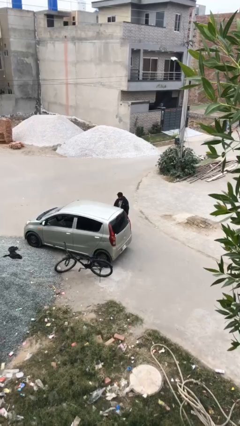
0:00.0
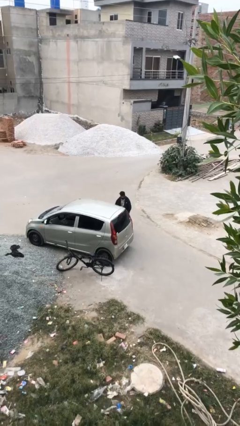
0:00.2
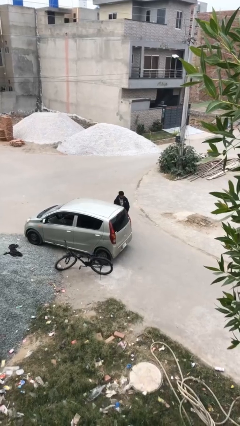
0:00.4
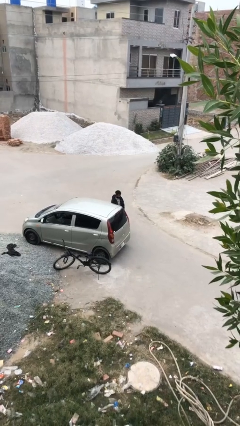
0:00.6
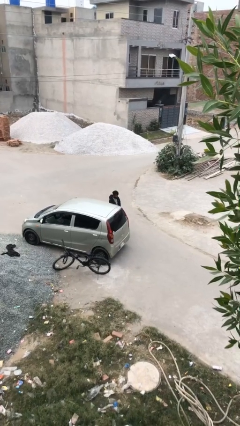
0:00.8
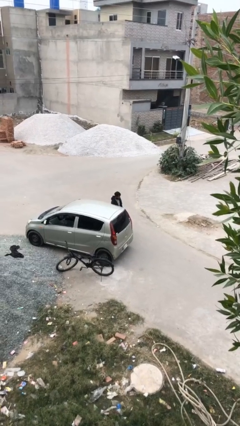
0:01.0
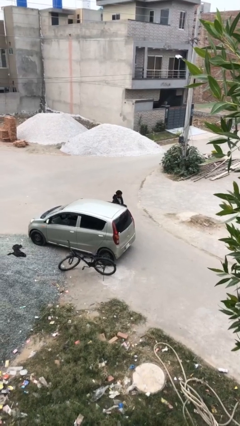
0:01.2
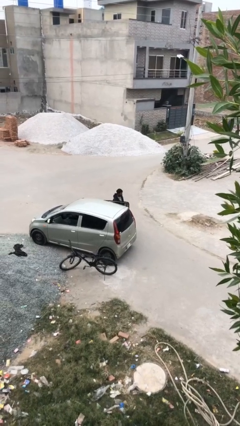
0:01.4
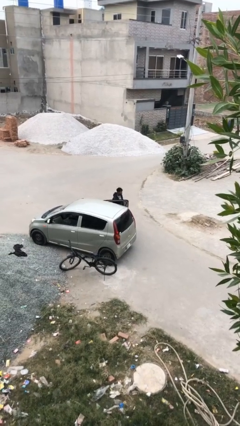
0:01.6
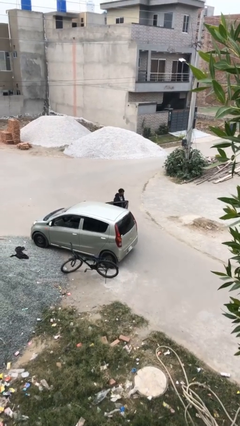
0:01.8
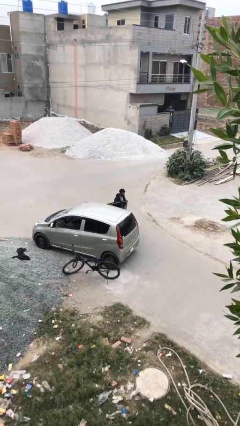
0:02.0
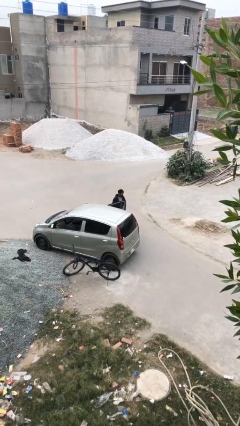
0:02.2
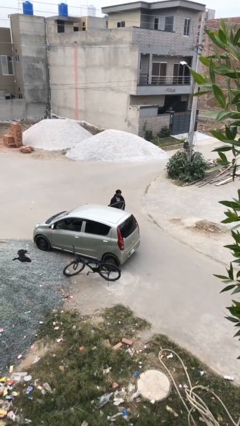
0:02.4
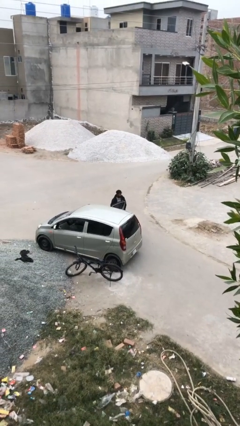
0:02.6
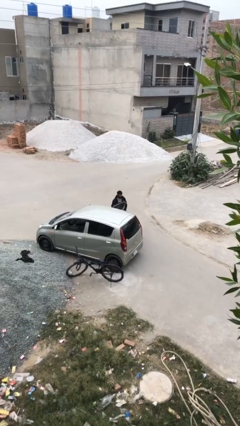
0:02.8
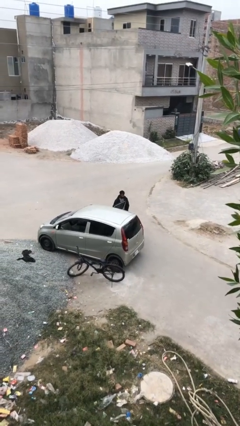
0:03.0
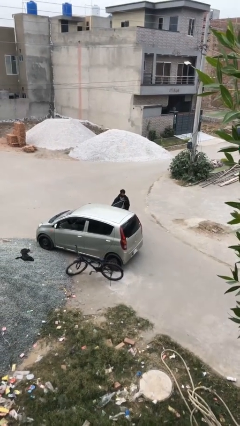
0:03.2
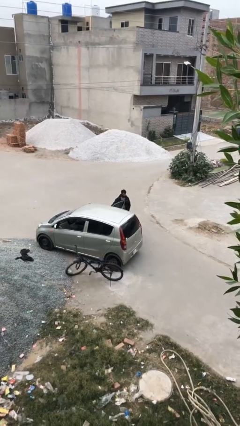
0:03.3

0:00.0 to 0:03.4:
person opens car door

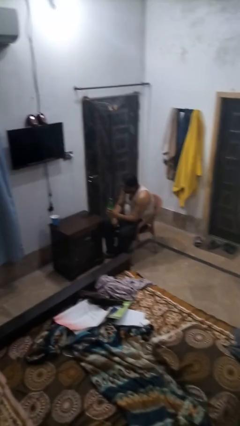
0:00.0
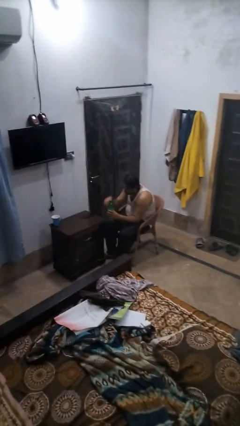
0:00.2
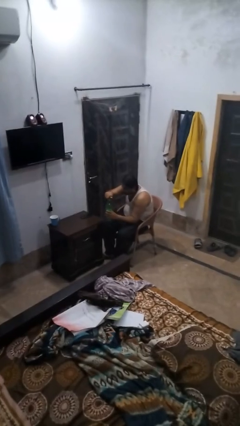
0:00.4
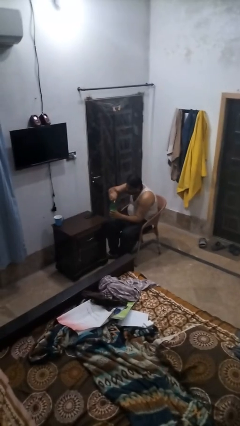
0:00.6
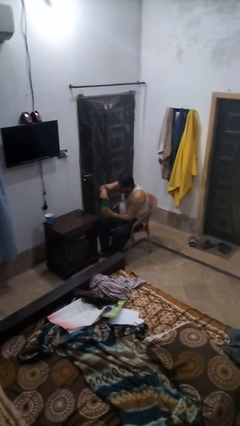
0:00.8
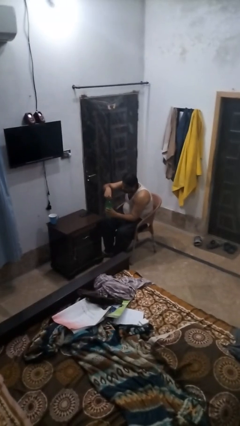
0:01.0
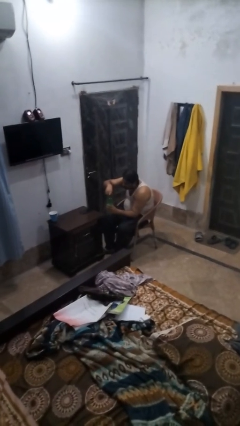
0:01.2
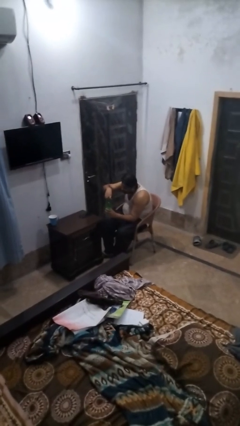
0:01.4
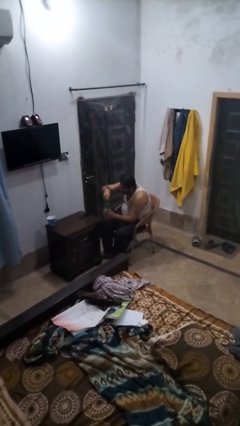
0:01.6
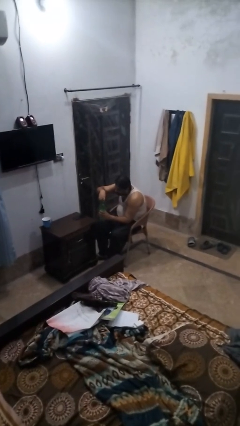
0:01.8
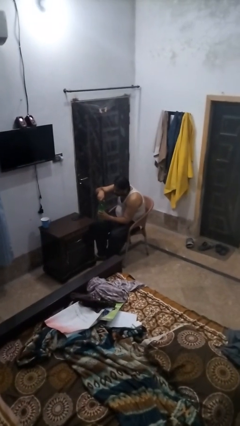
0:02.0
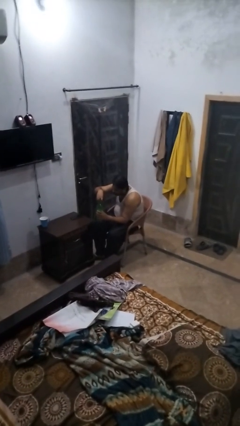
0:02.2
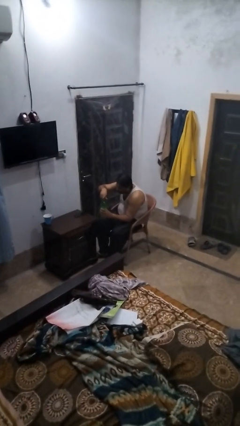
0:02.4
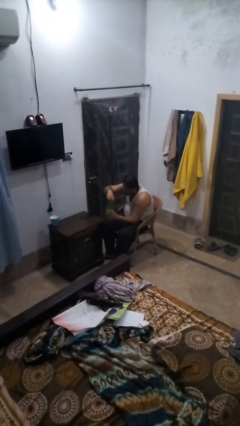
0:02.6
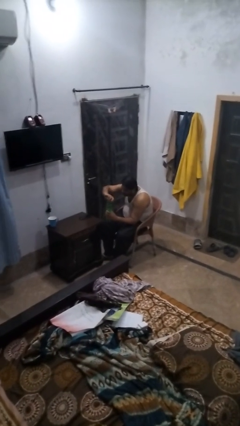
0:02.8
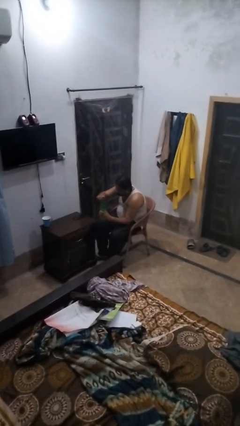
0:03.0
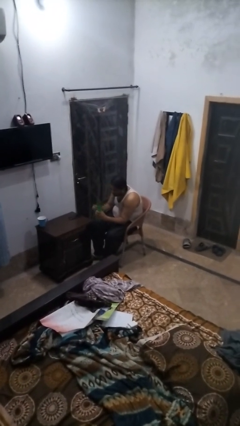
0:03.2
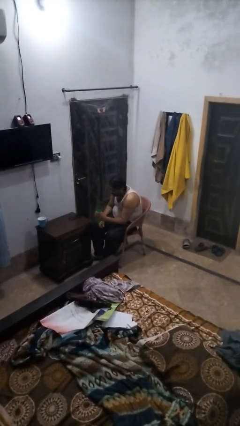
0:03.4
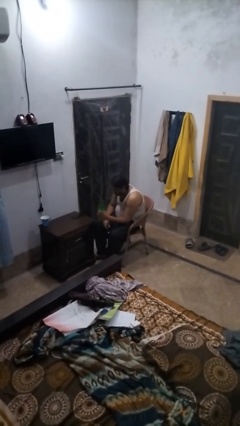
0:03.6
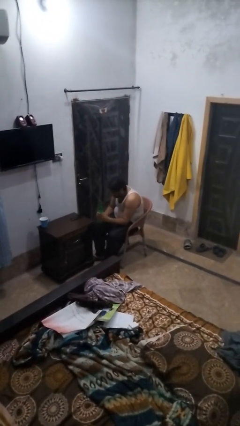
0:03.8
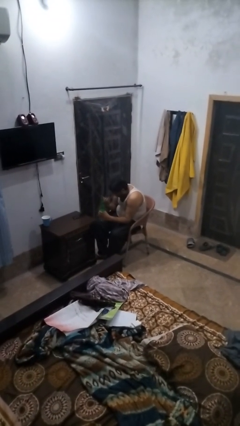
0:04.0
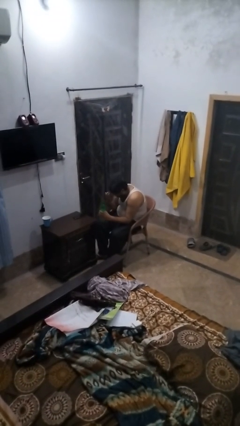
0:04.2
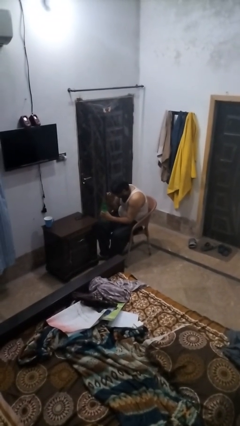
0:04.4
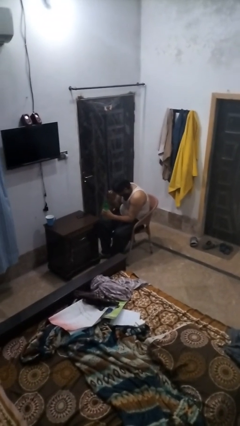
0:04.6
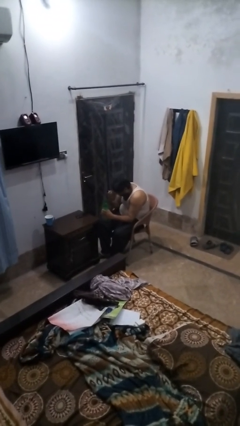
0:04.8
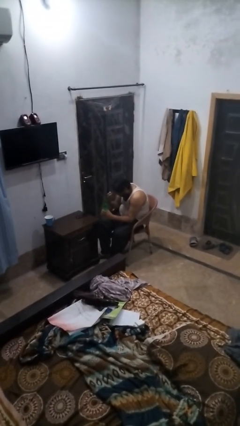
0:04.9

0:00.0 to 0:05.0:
person unscrews lid from bottle

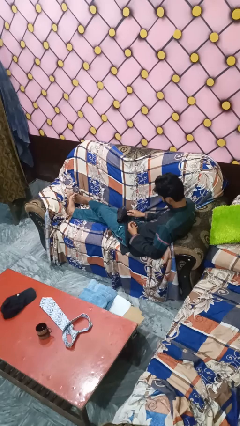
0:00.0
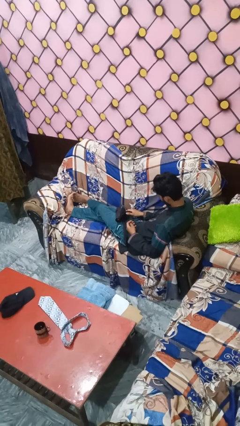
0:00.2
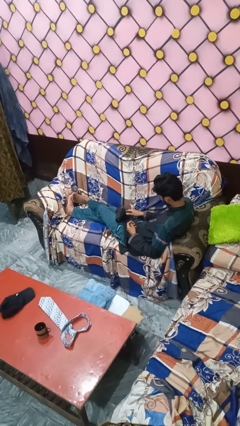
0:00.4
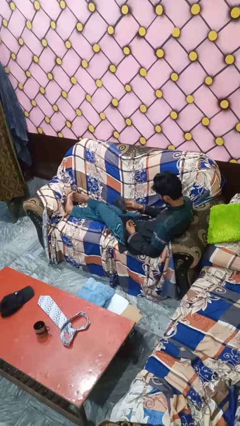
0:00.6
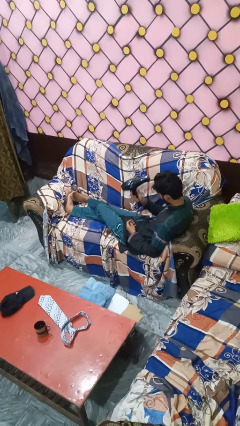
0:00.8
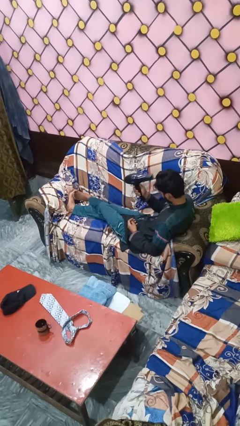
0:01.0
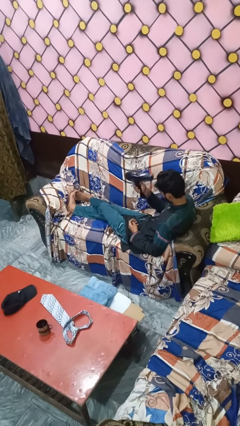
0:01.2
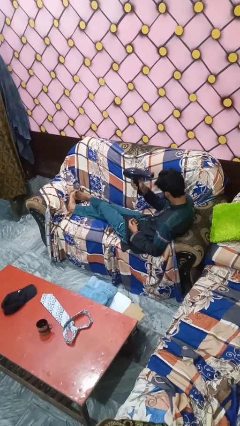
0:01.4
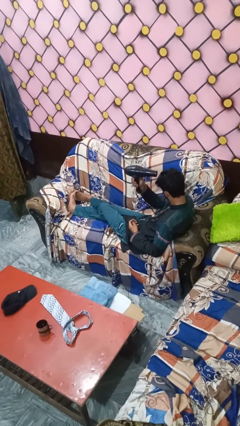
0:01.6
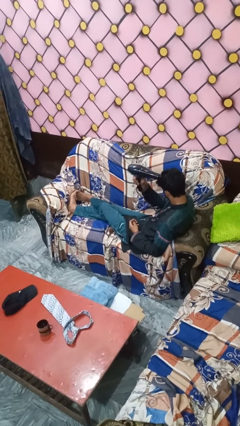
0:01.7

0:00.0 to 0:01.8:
person dries hair with hairdryer

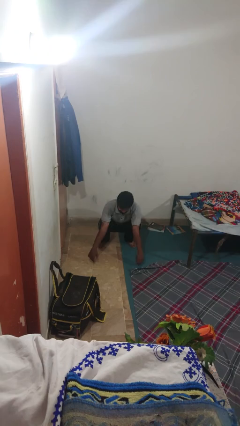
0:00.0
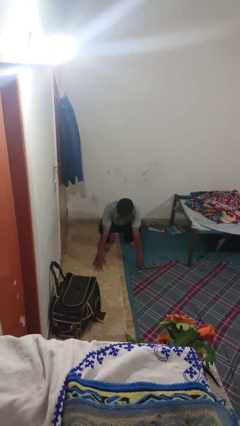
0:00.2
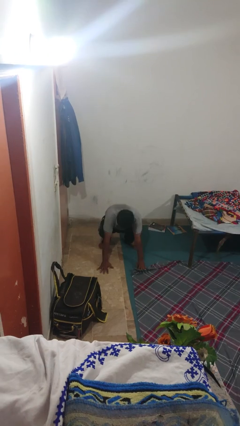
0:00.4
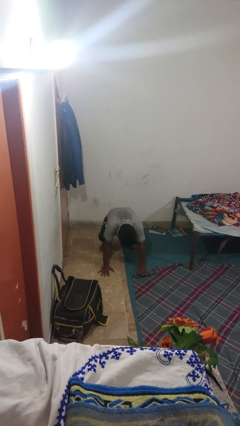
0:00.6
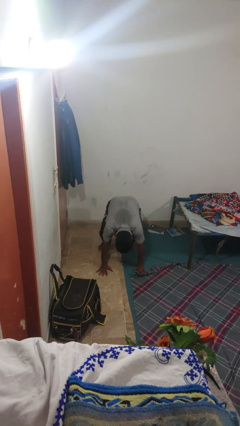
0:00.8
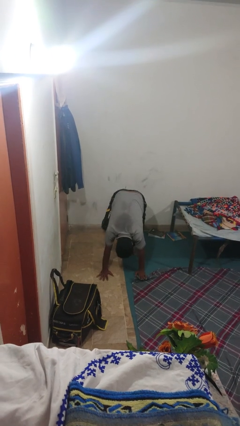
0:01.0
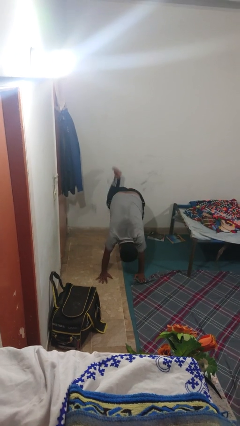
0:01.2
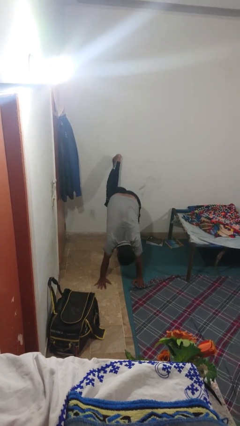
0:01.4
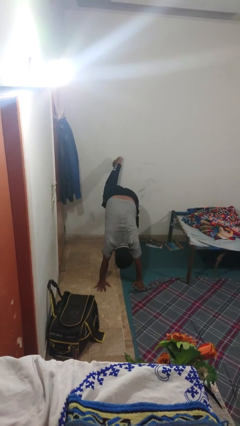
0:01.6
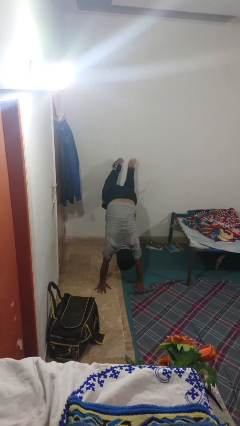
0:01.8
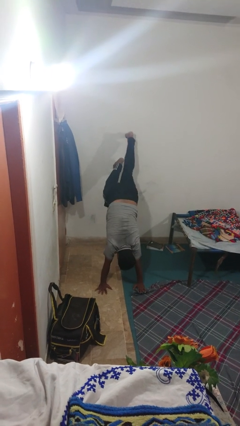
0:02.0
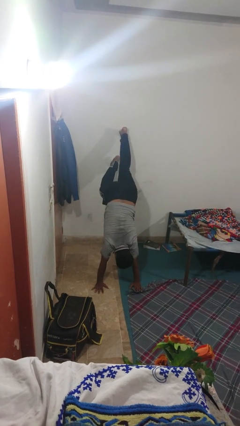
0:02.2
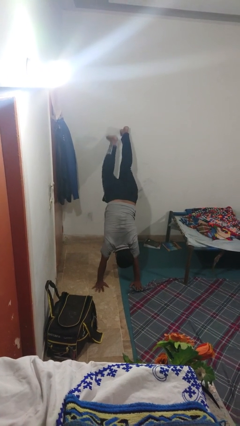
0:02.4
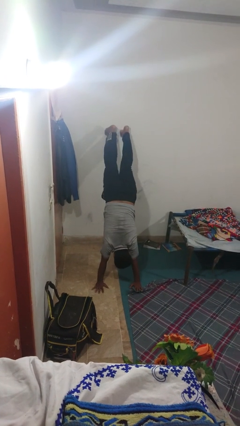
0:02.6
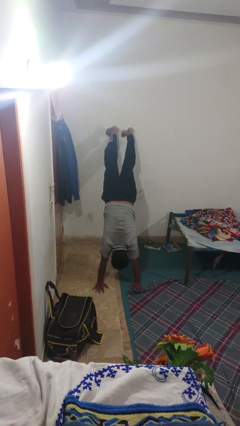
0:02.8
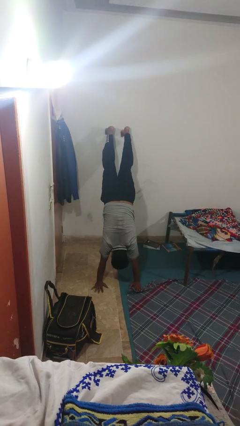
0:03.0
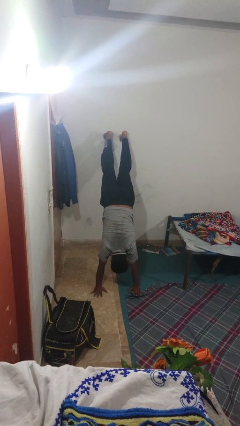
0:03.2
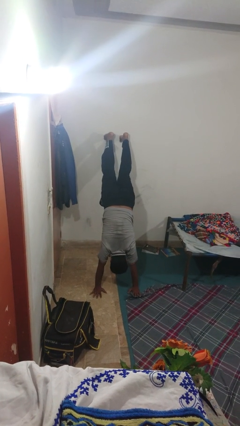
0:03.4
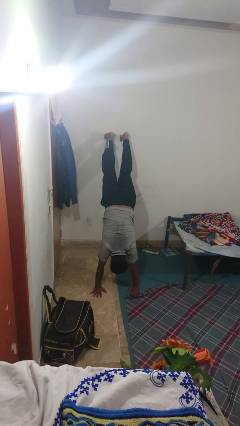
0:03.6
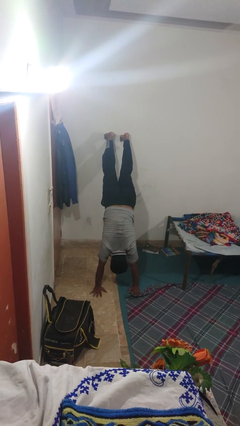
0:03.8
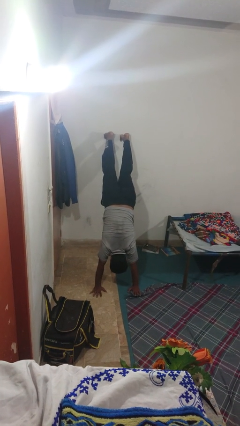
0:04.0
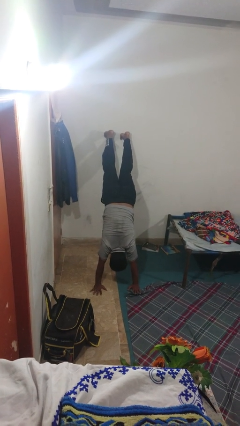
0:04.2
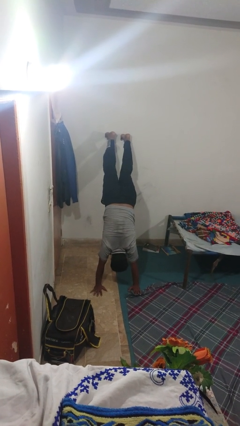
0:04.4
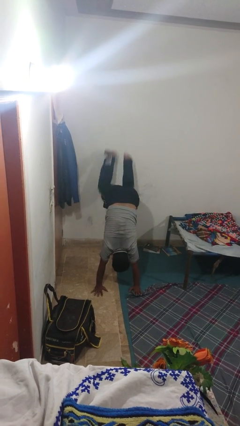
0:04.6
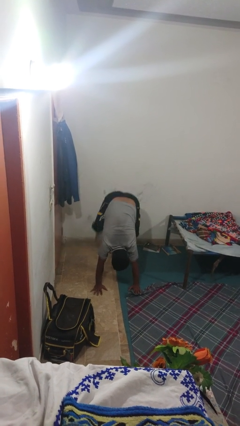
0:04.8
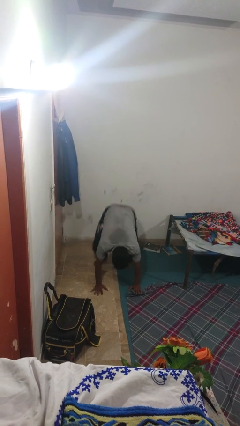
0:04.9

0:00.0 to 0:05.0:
person handstand

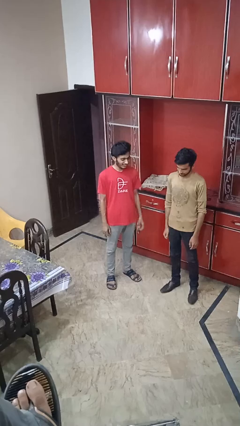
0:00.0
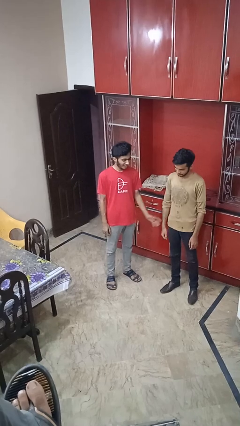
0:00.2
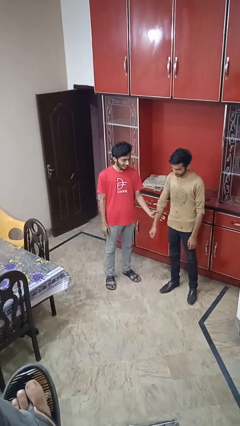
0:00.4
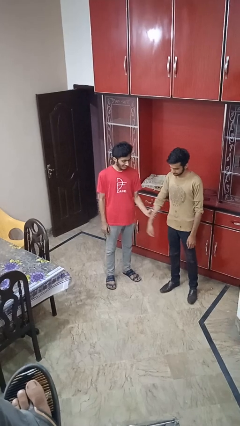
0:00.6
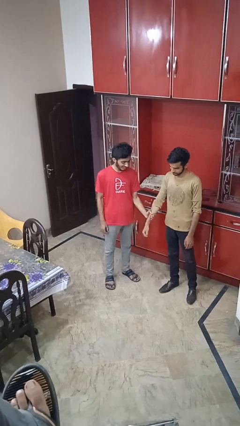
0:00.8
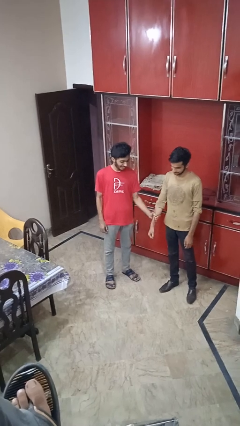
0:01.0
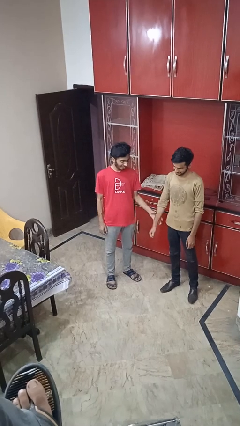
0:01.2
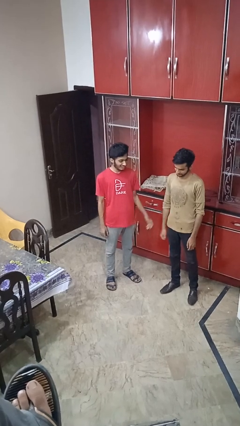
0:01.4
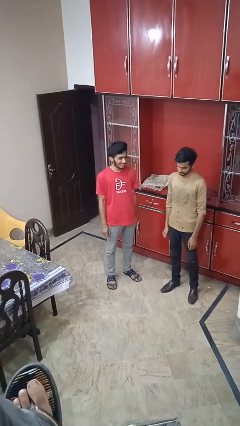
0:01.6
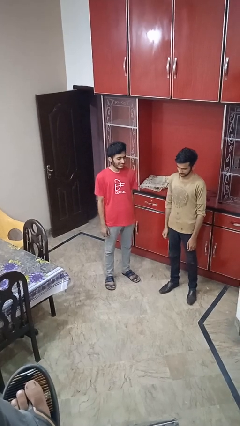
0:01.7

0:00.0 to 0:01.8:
person grabs person by forearm

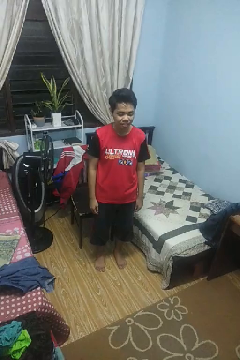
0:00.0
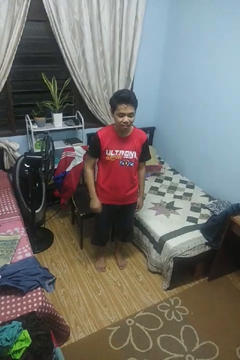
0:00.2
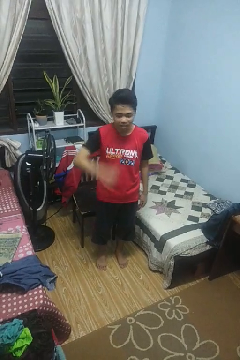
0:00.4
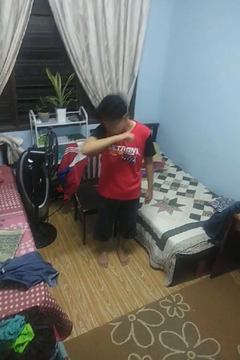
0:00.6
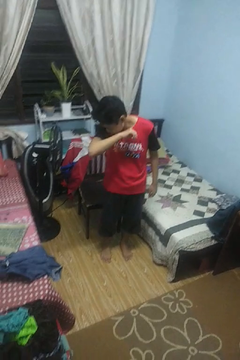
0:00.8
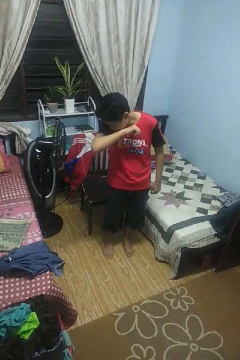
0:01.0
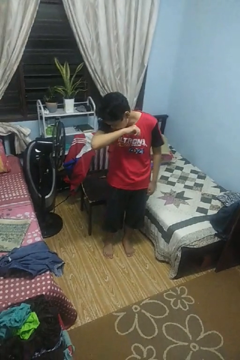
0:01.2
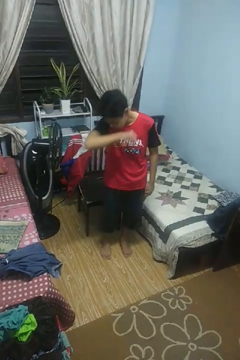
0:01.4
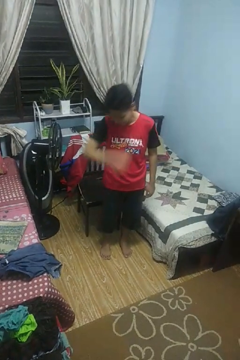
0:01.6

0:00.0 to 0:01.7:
person sneezes into arm
